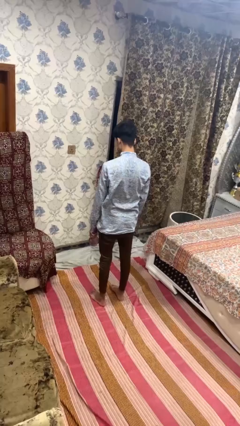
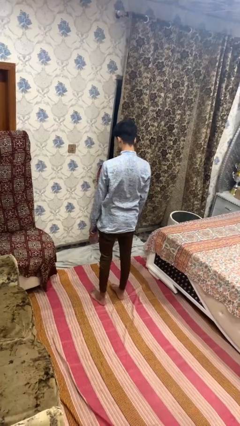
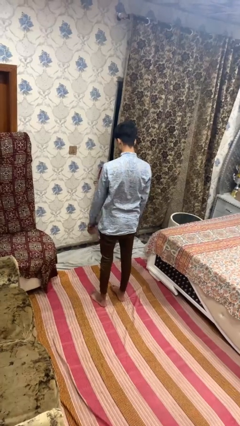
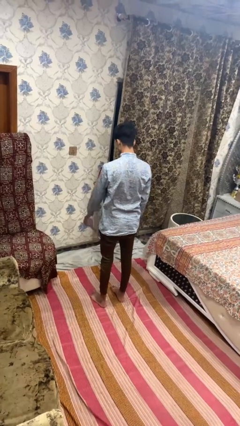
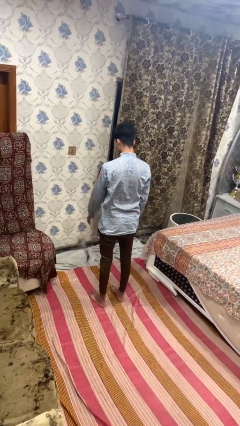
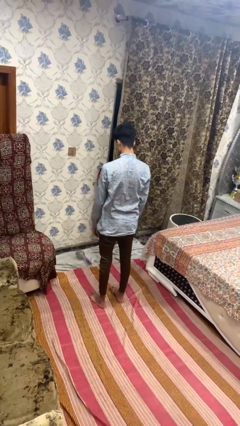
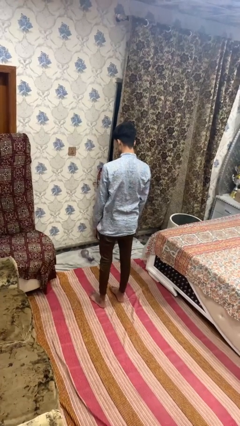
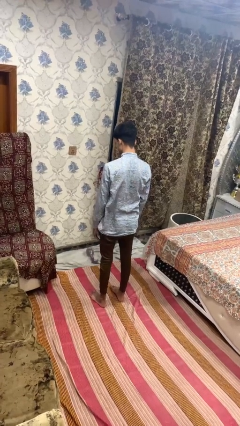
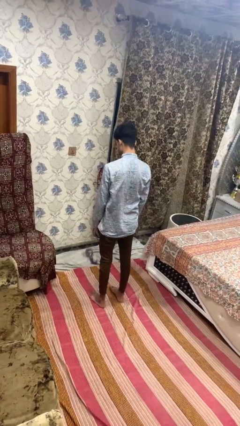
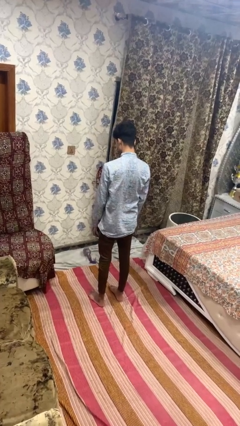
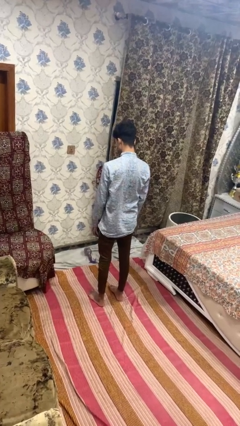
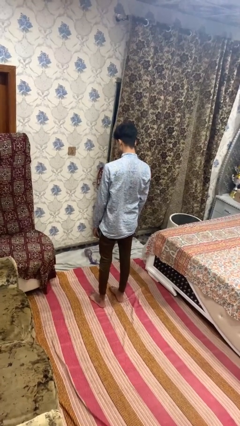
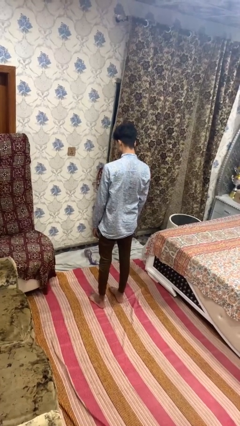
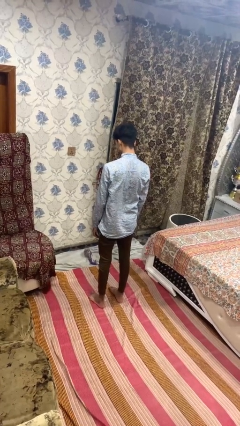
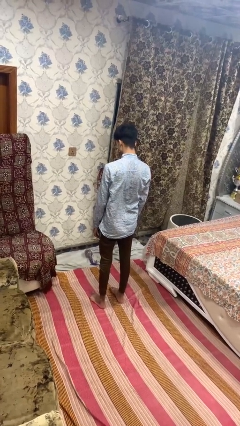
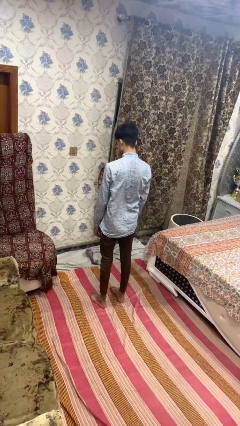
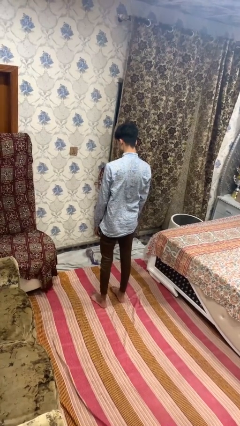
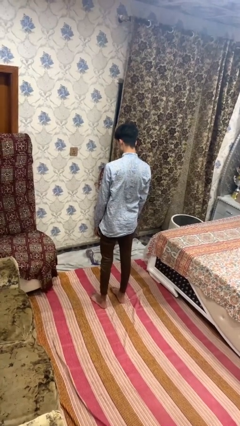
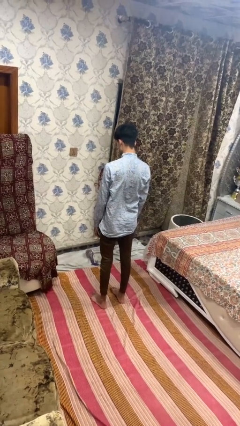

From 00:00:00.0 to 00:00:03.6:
person throws object to ground

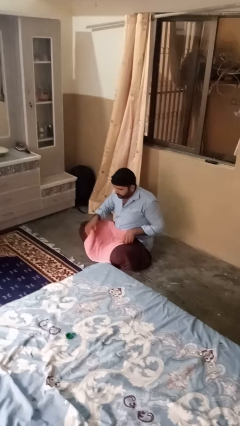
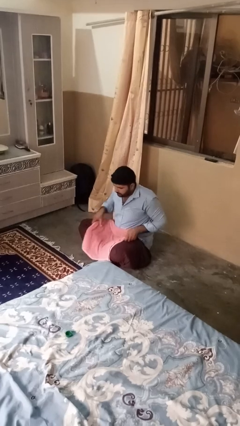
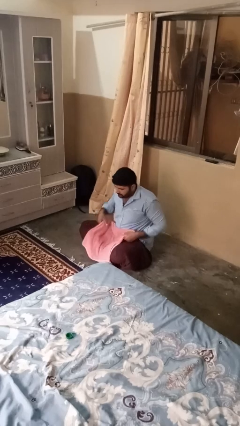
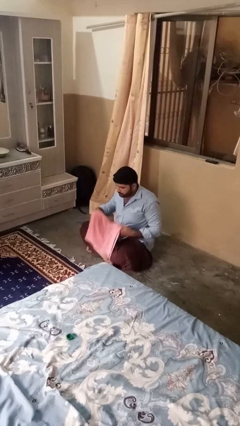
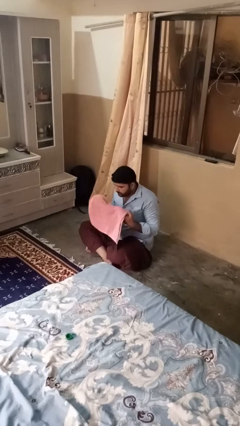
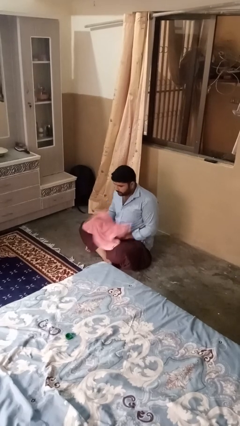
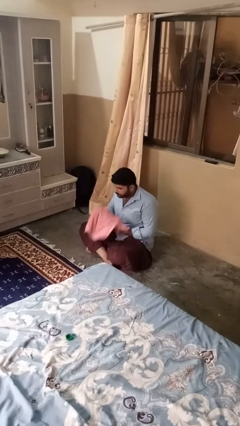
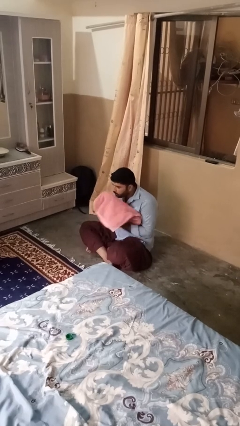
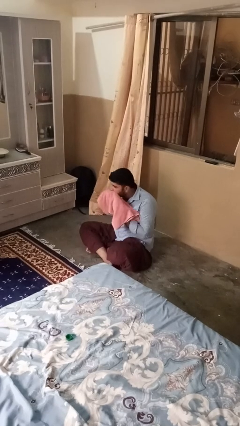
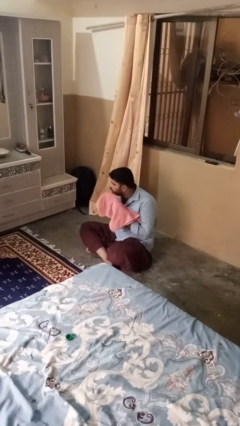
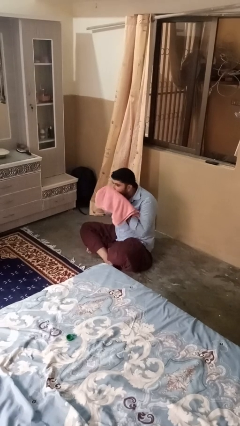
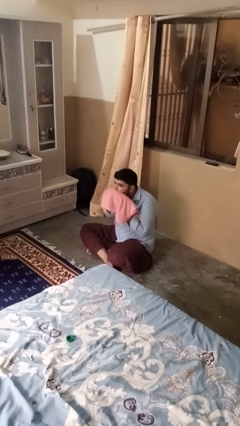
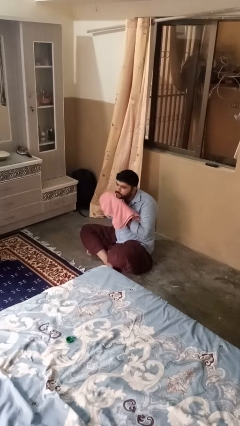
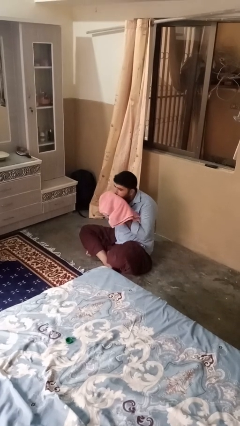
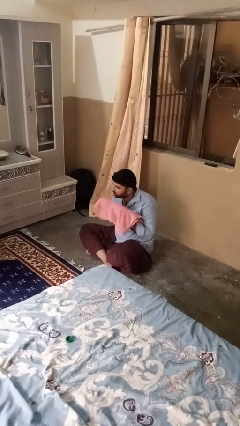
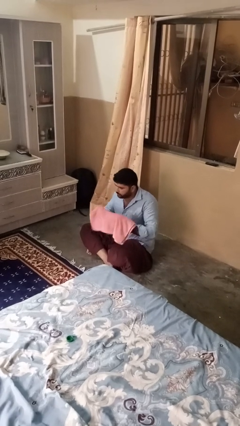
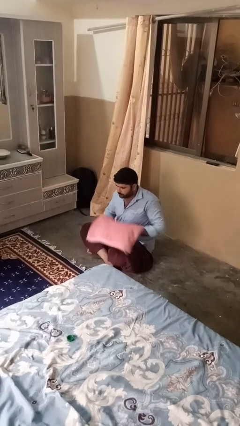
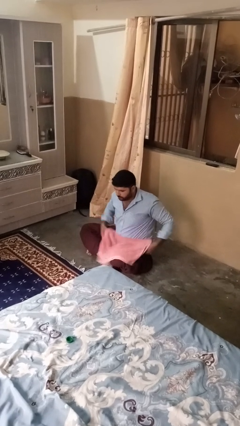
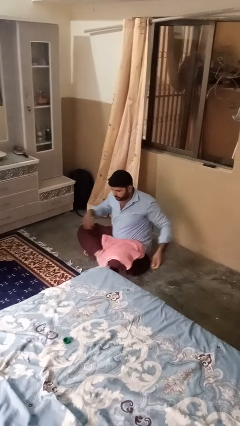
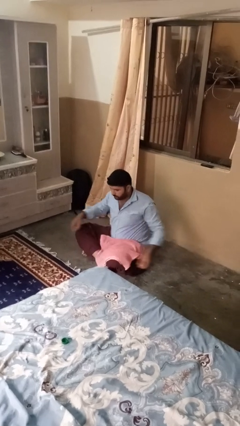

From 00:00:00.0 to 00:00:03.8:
person wipes mouth with napkin

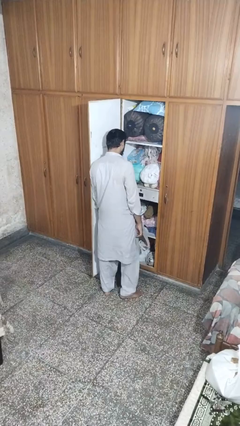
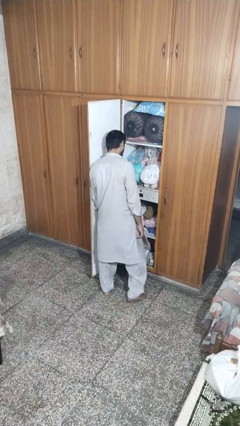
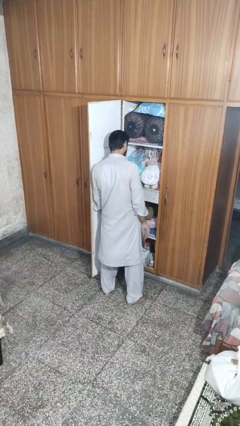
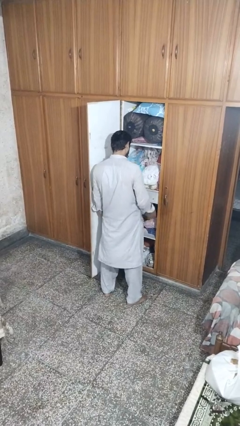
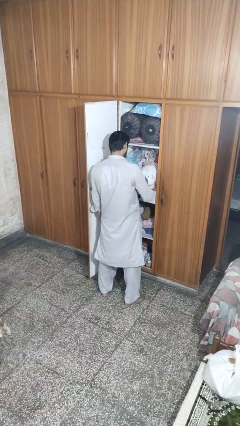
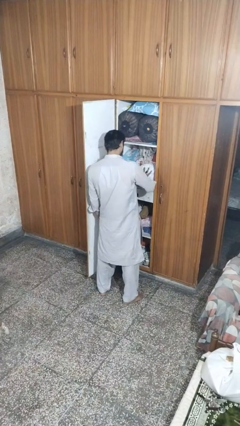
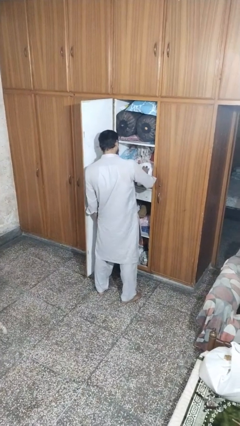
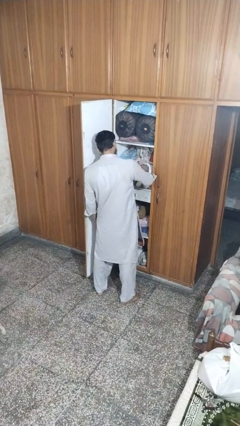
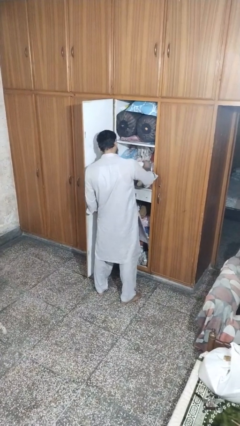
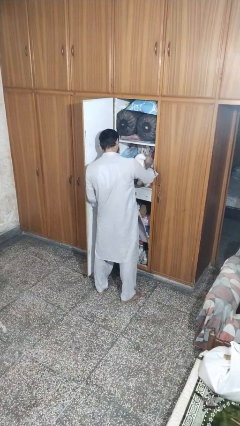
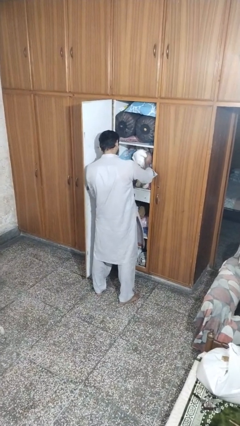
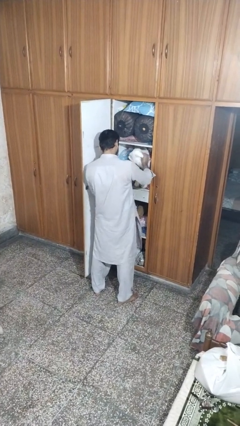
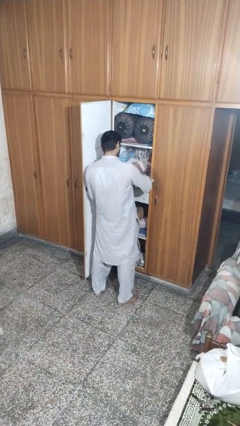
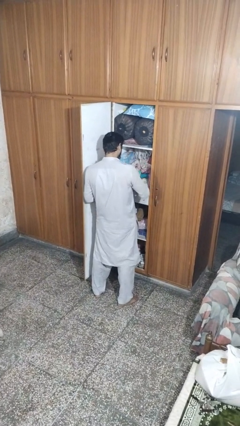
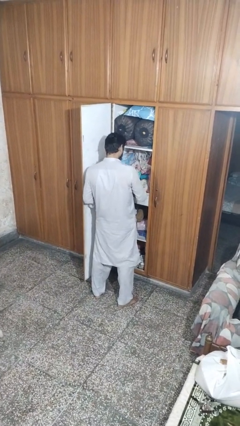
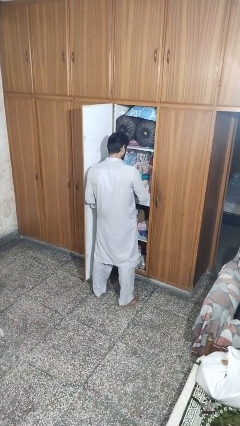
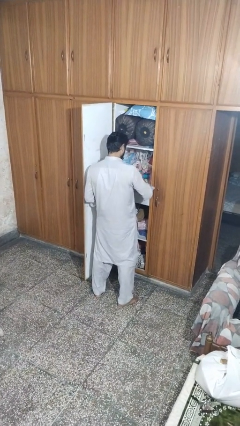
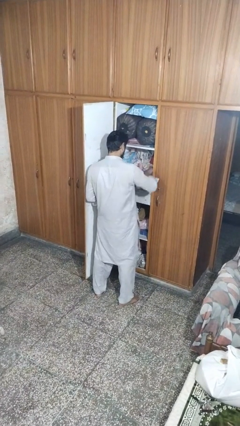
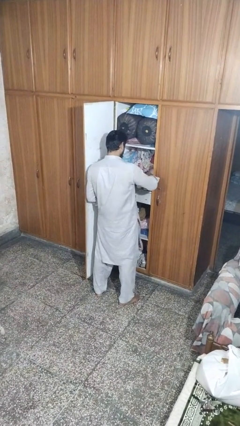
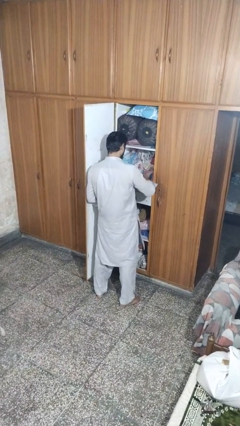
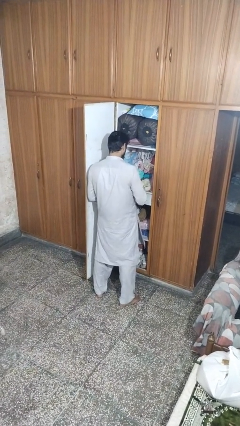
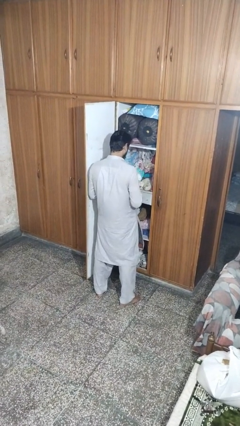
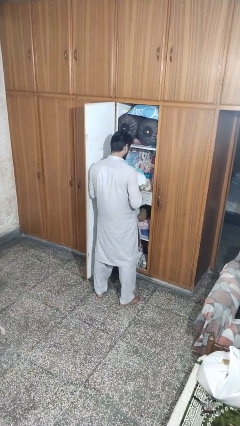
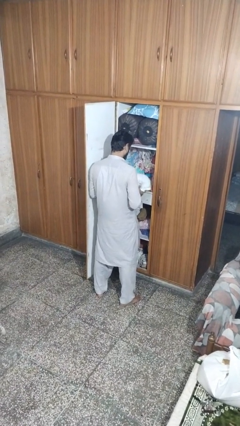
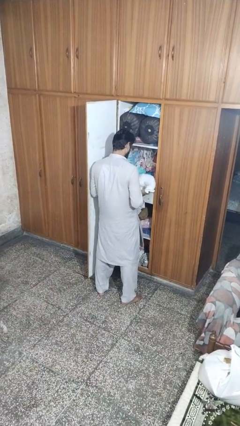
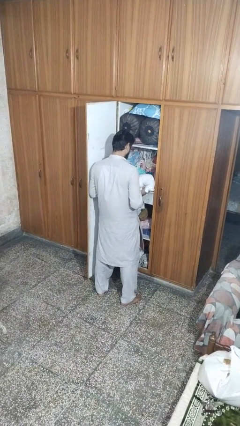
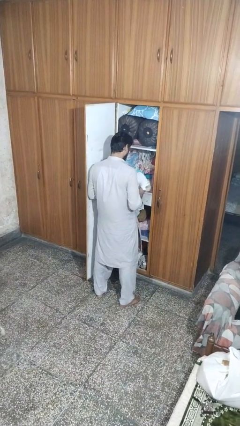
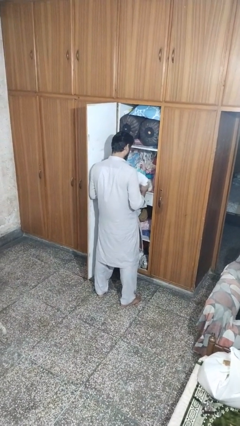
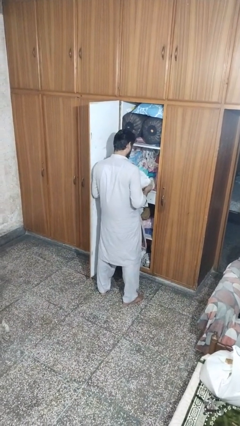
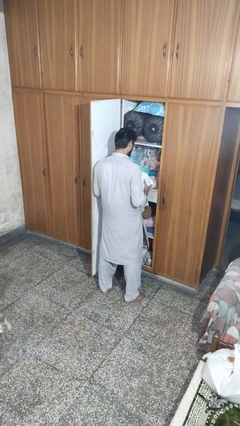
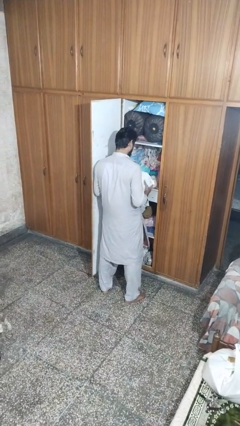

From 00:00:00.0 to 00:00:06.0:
person picks up object from cabinet

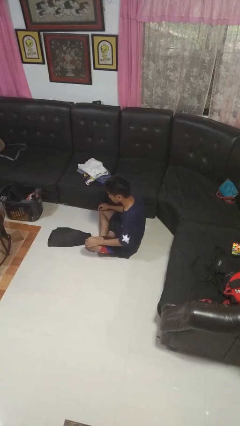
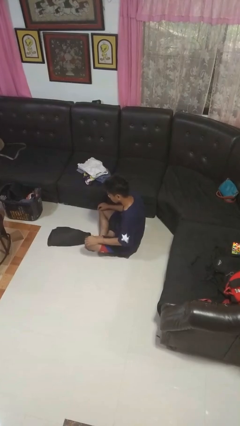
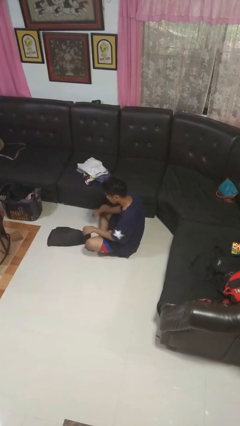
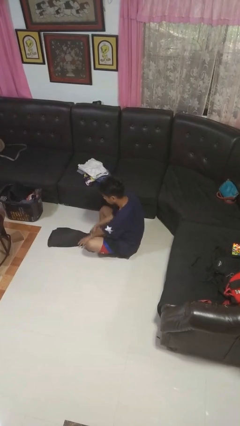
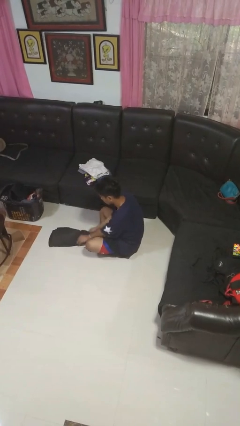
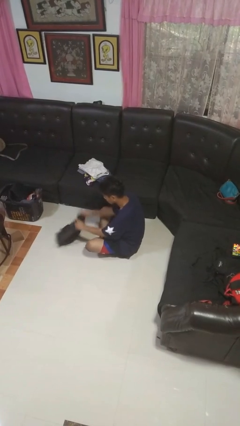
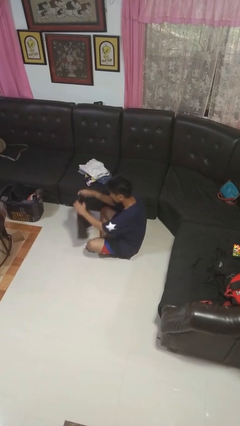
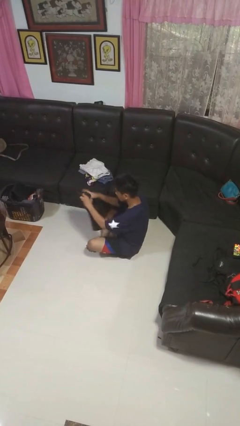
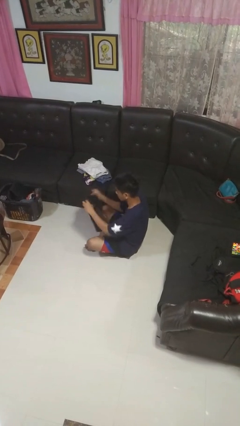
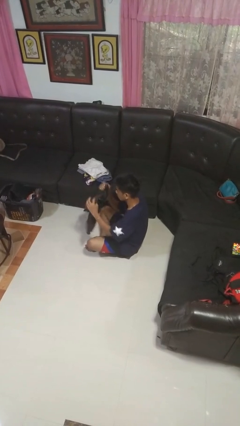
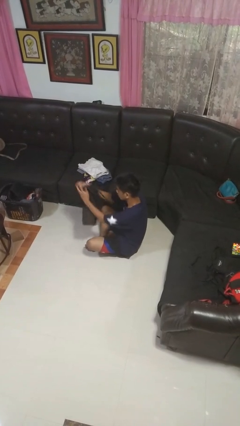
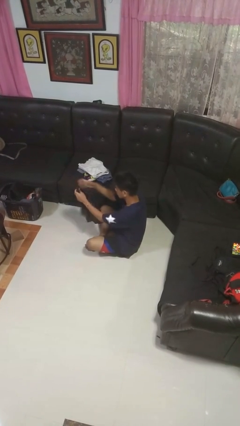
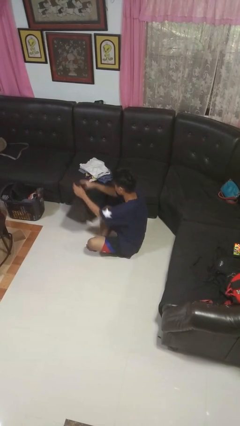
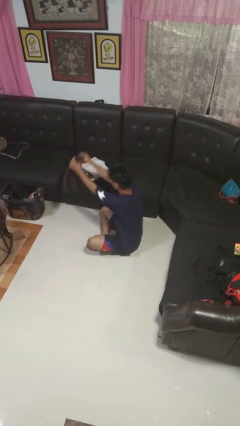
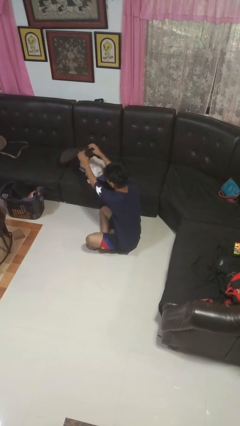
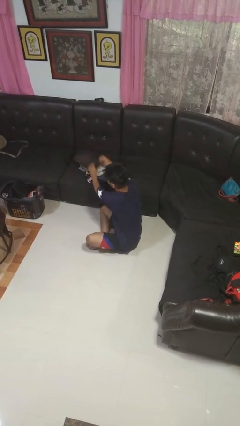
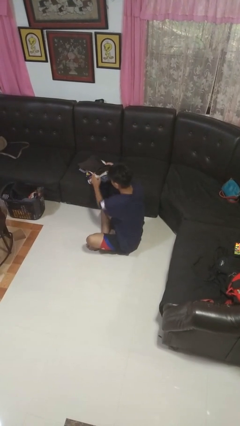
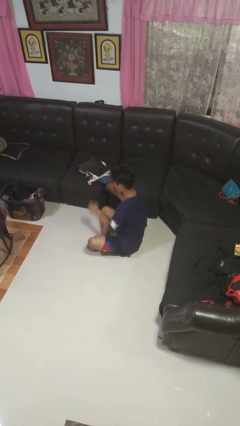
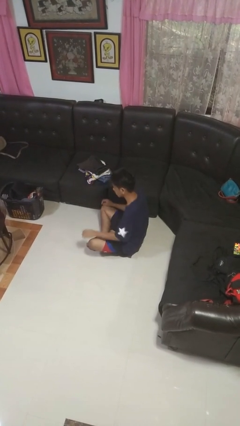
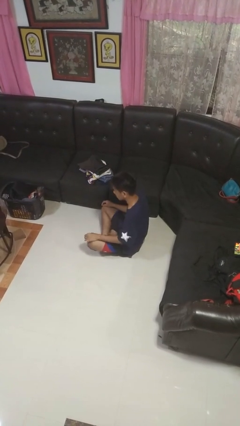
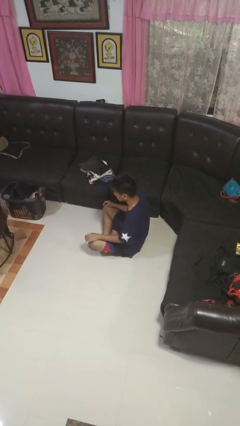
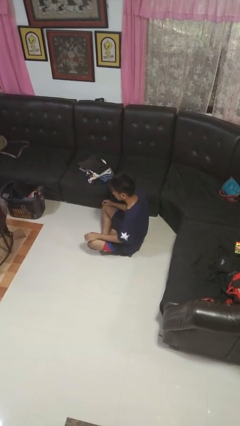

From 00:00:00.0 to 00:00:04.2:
person folds pants
